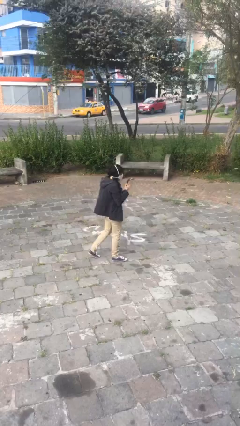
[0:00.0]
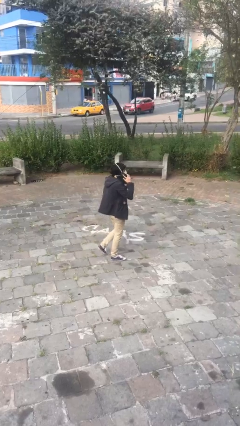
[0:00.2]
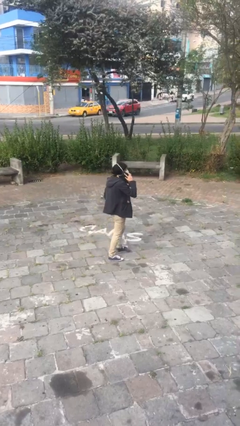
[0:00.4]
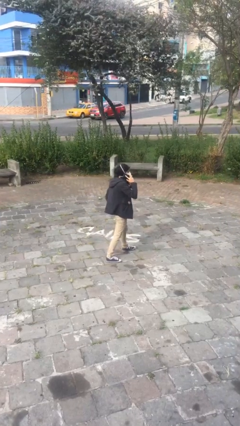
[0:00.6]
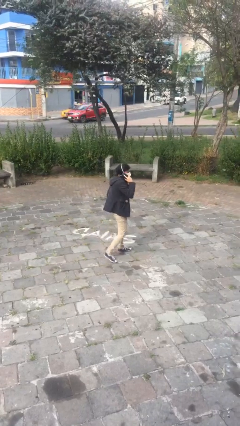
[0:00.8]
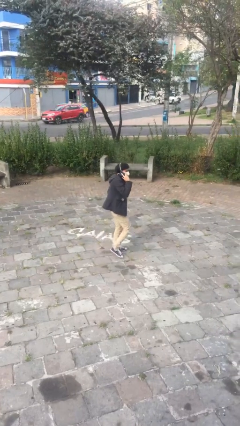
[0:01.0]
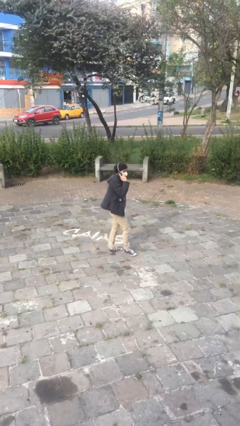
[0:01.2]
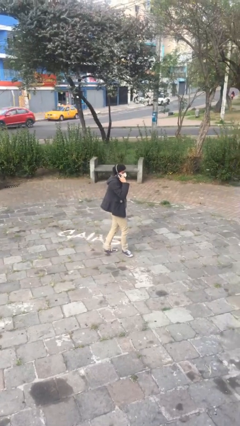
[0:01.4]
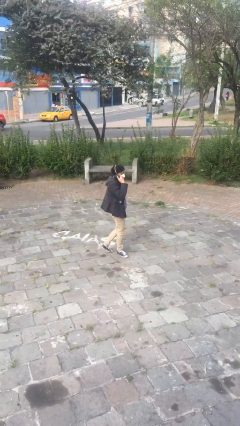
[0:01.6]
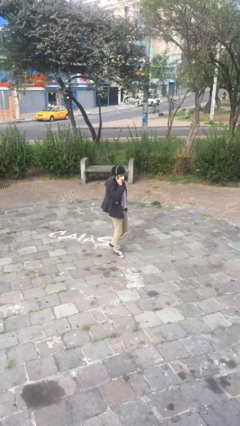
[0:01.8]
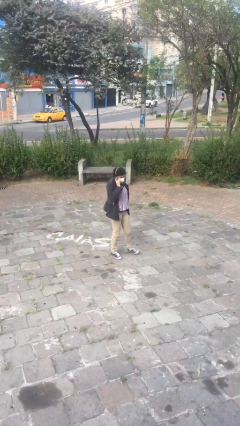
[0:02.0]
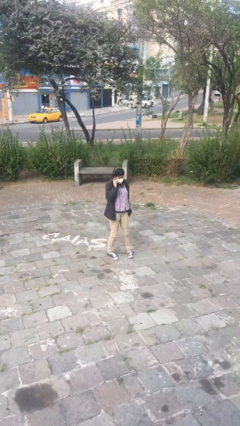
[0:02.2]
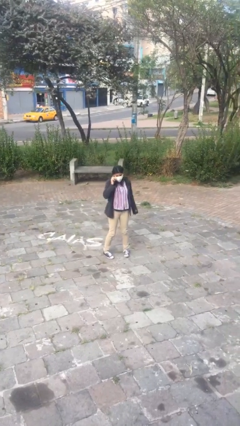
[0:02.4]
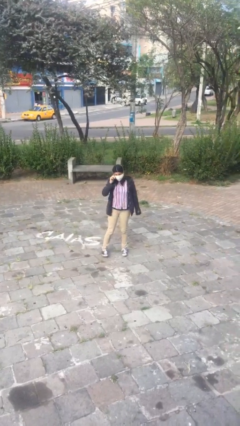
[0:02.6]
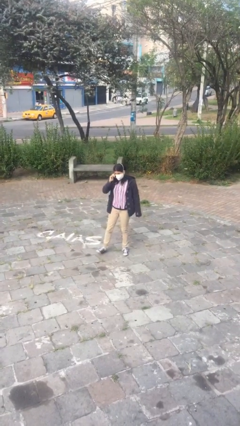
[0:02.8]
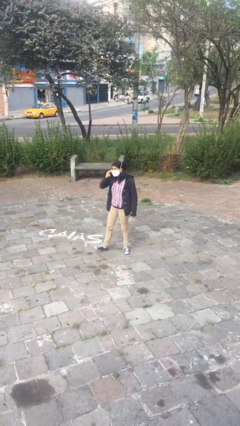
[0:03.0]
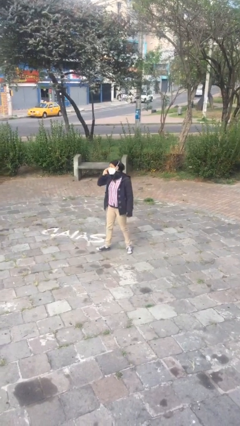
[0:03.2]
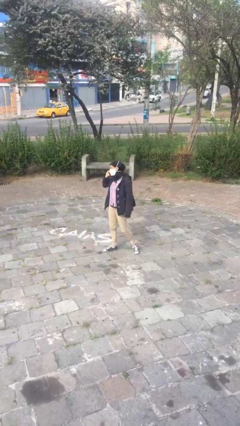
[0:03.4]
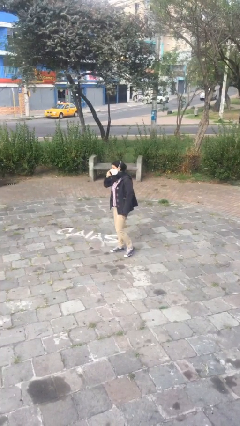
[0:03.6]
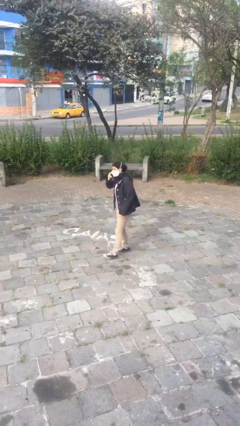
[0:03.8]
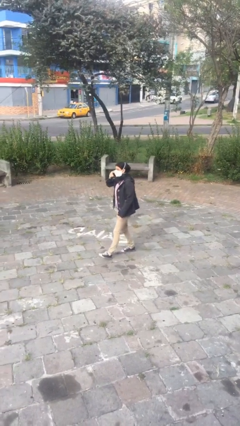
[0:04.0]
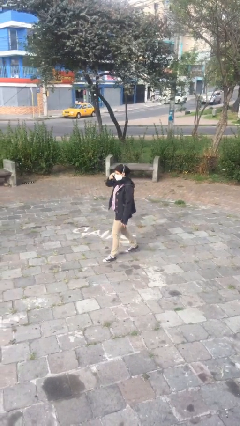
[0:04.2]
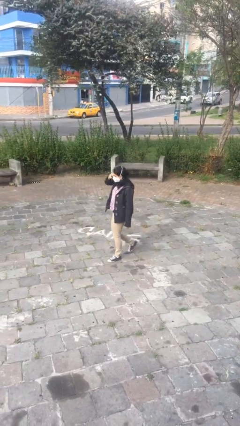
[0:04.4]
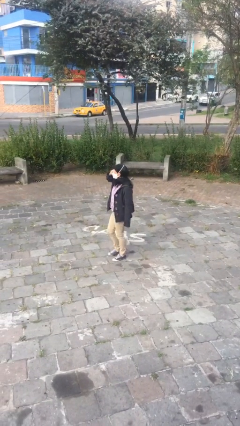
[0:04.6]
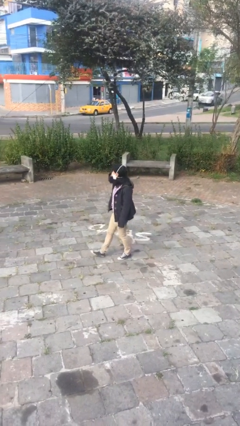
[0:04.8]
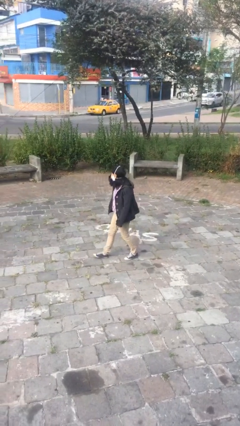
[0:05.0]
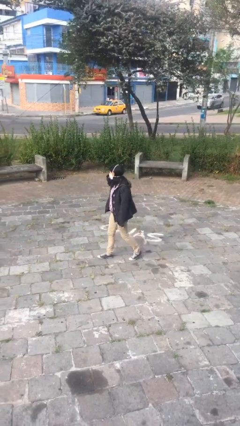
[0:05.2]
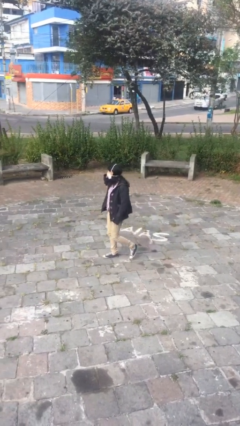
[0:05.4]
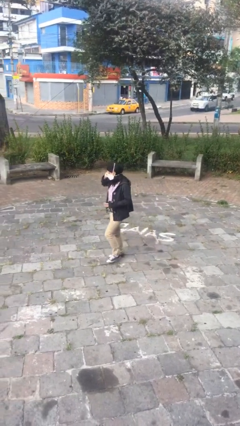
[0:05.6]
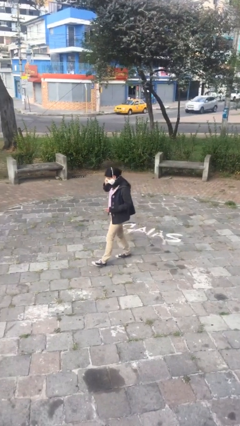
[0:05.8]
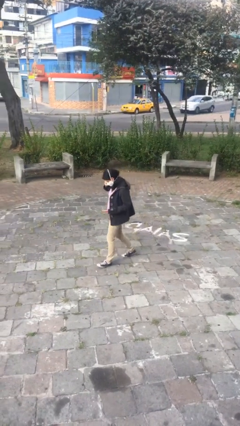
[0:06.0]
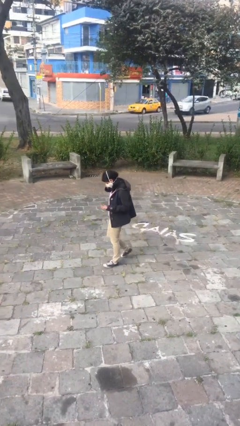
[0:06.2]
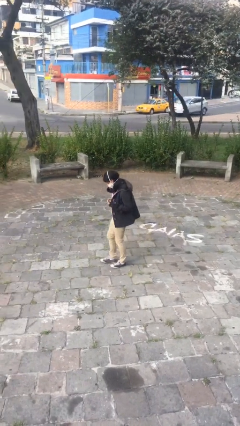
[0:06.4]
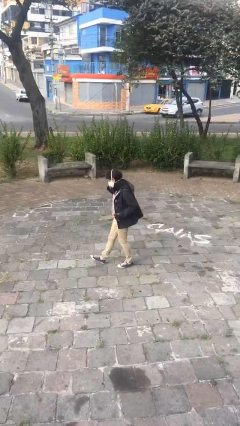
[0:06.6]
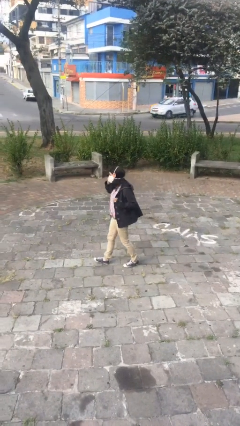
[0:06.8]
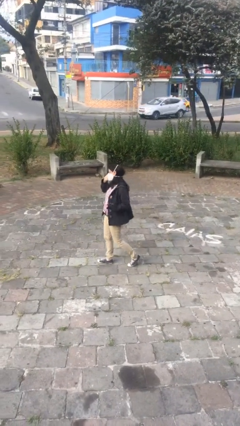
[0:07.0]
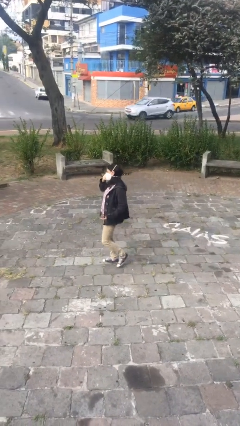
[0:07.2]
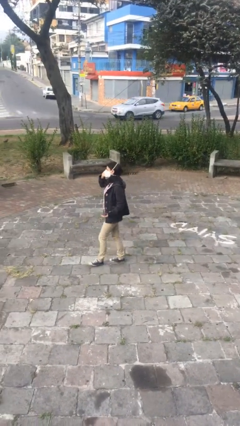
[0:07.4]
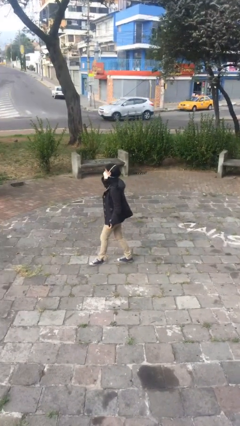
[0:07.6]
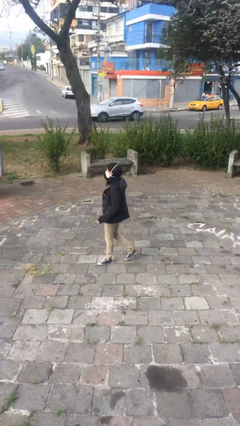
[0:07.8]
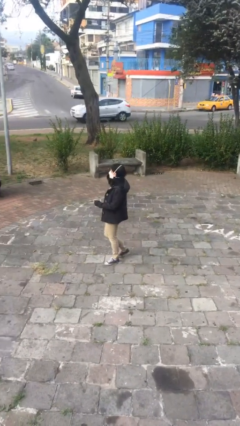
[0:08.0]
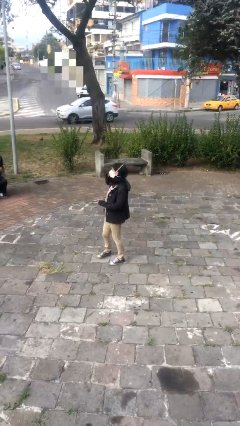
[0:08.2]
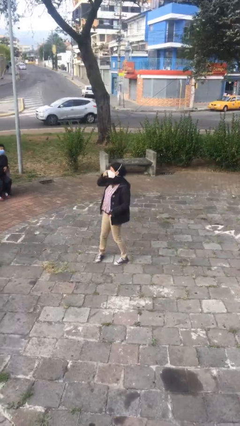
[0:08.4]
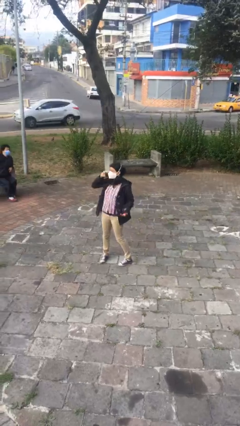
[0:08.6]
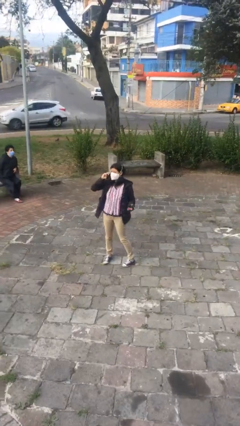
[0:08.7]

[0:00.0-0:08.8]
person talks on phone

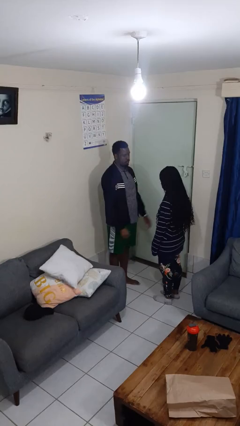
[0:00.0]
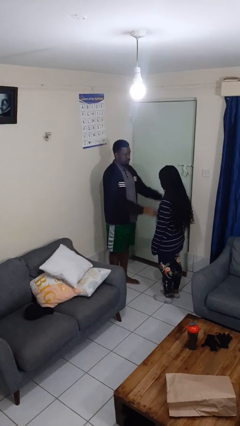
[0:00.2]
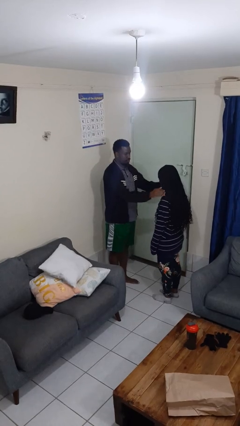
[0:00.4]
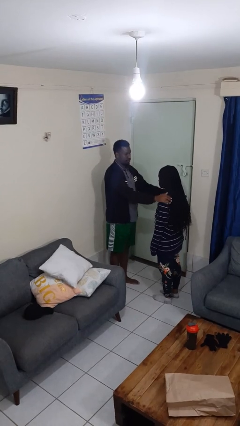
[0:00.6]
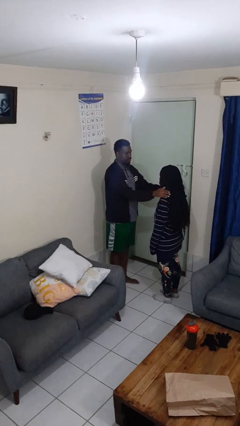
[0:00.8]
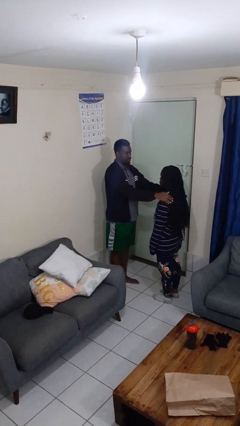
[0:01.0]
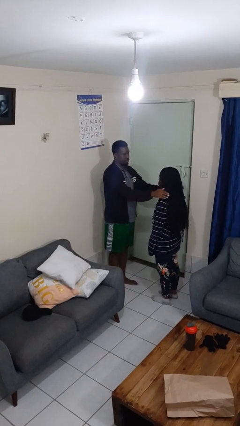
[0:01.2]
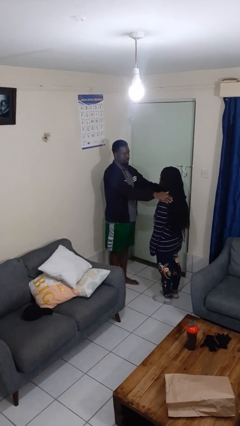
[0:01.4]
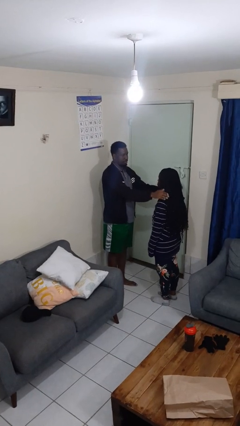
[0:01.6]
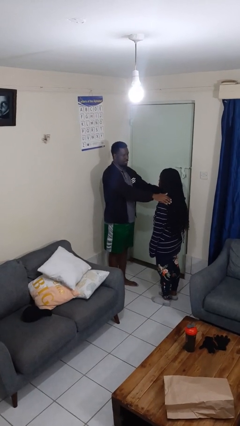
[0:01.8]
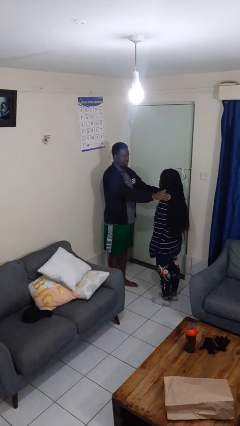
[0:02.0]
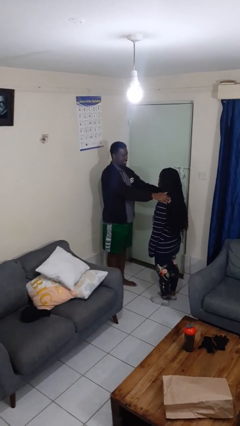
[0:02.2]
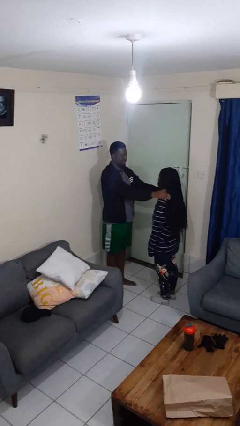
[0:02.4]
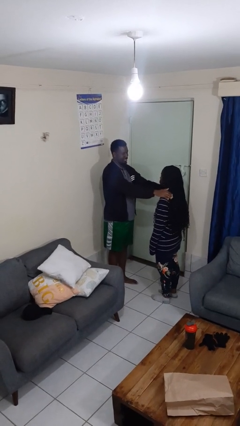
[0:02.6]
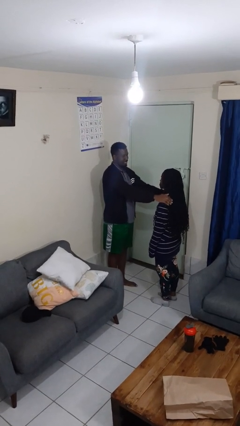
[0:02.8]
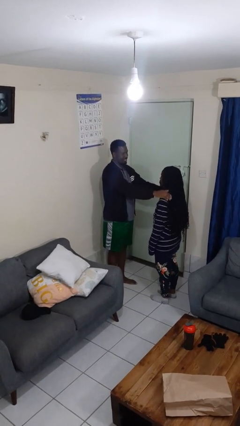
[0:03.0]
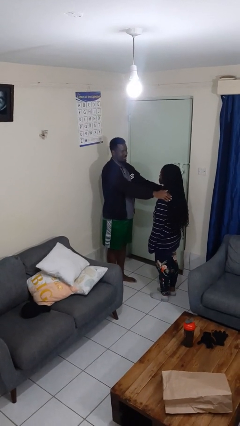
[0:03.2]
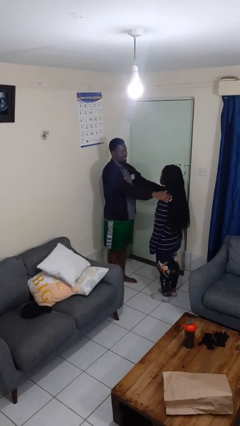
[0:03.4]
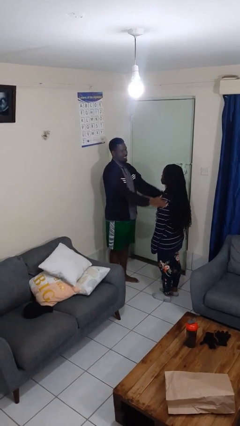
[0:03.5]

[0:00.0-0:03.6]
person pounds shoulders of person

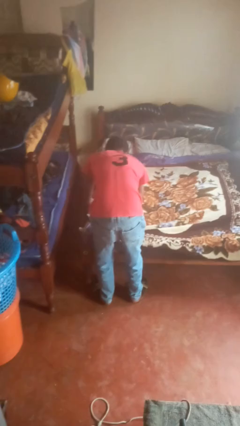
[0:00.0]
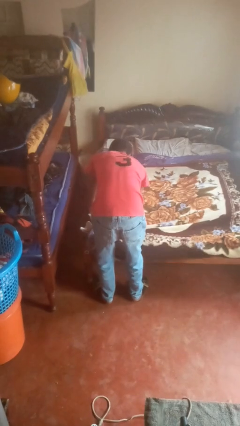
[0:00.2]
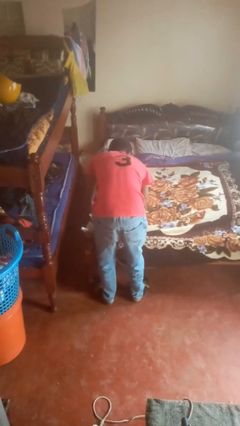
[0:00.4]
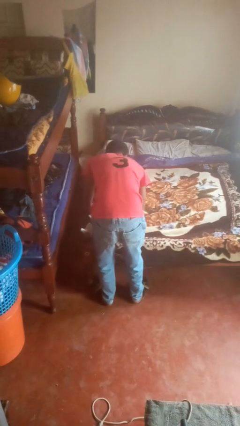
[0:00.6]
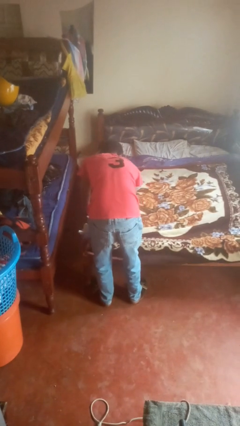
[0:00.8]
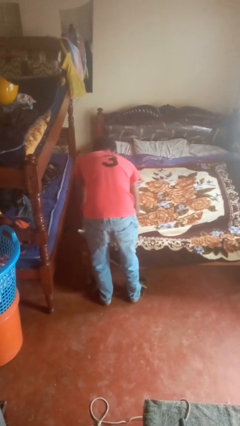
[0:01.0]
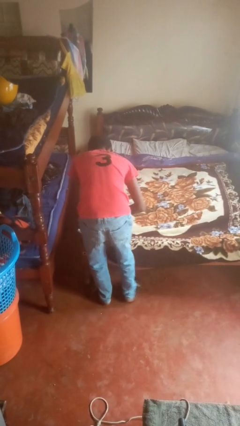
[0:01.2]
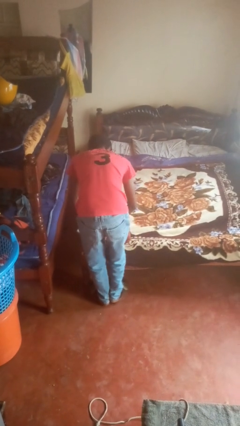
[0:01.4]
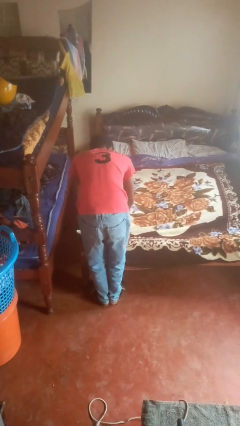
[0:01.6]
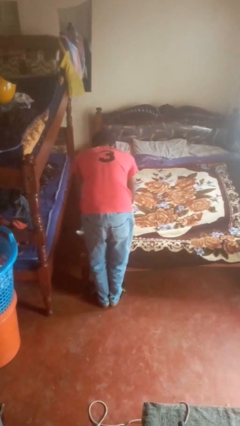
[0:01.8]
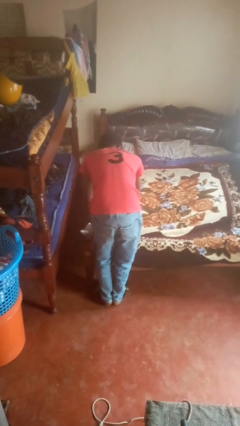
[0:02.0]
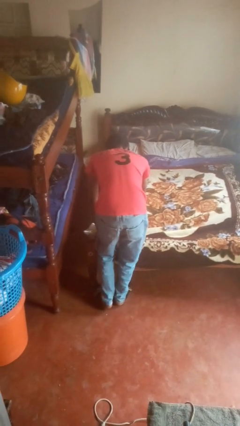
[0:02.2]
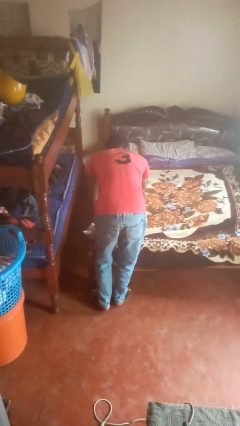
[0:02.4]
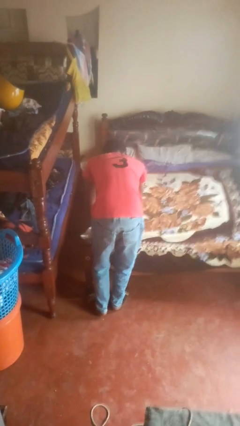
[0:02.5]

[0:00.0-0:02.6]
person makes bed

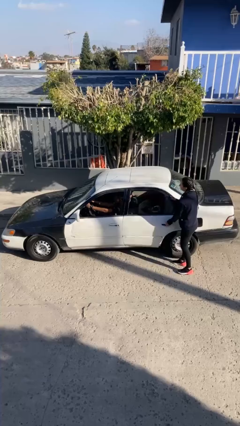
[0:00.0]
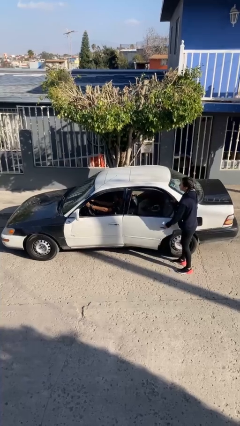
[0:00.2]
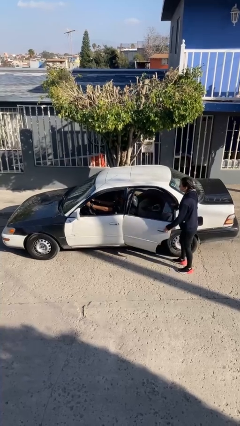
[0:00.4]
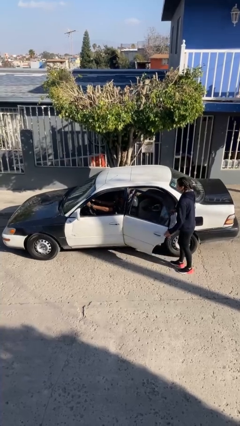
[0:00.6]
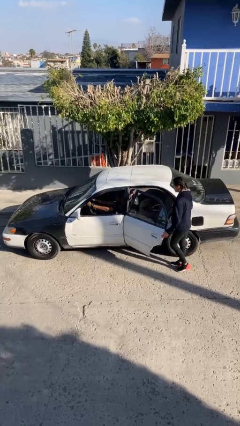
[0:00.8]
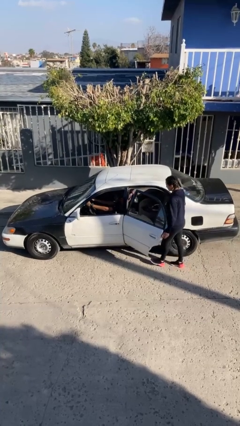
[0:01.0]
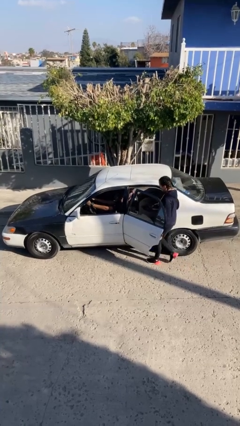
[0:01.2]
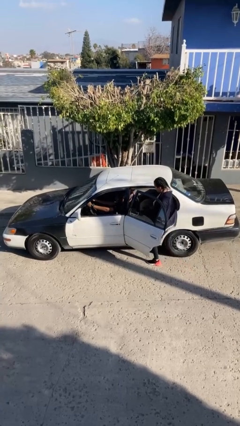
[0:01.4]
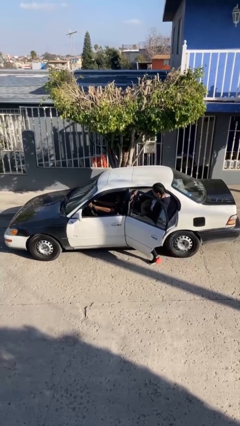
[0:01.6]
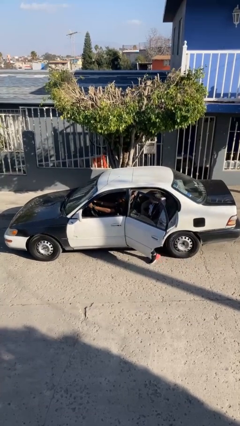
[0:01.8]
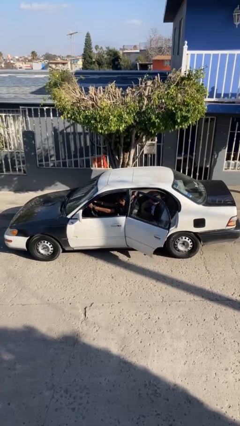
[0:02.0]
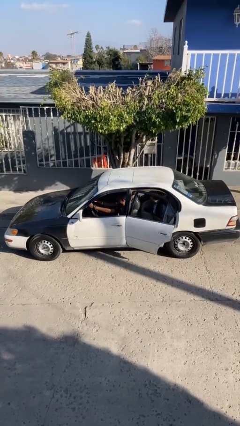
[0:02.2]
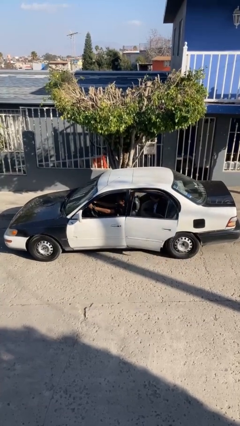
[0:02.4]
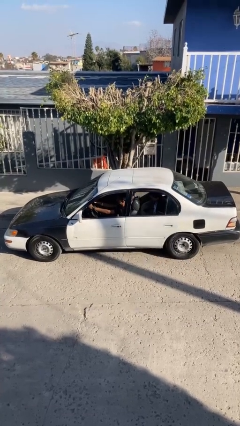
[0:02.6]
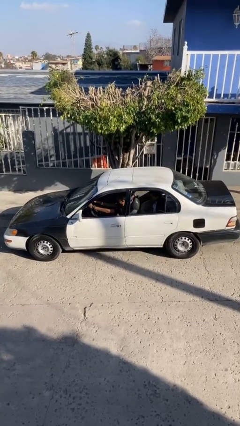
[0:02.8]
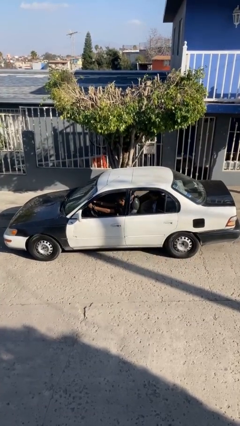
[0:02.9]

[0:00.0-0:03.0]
car picks up person
